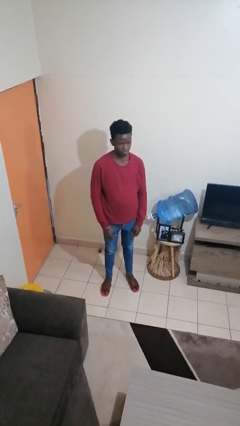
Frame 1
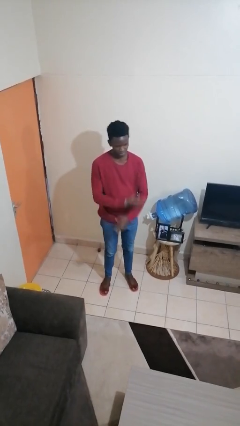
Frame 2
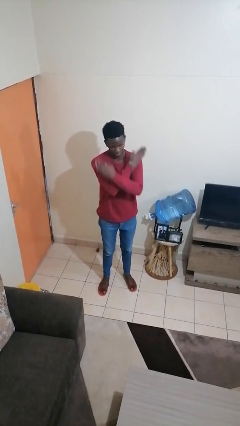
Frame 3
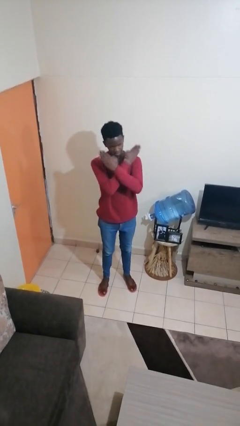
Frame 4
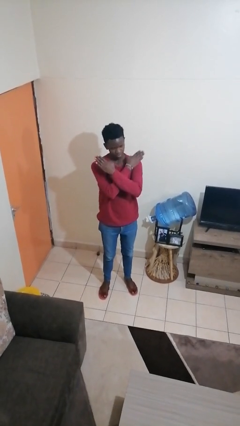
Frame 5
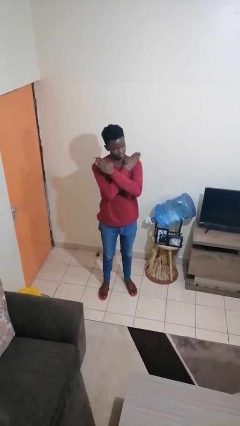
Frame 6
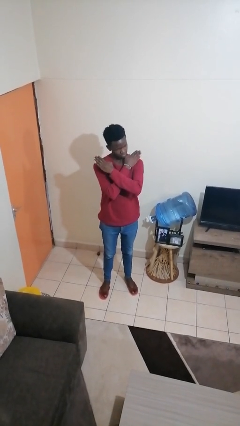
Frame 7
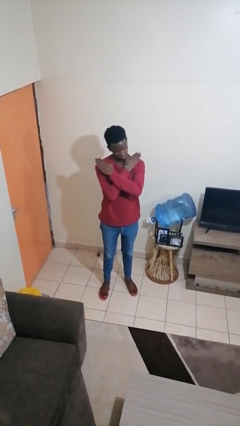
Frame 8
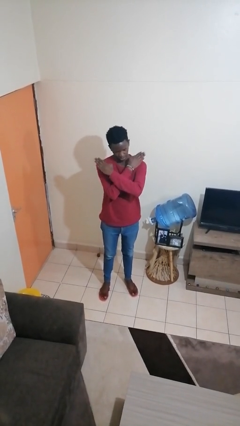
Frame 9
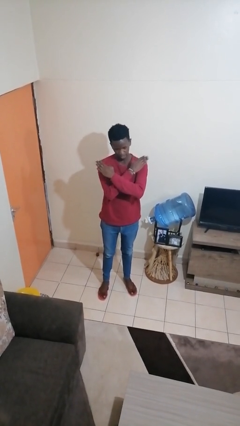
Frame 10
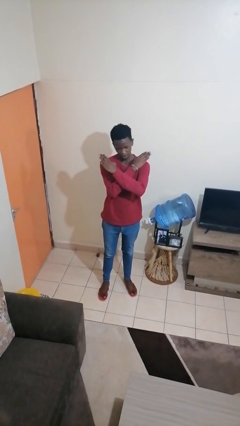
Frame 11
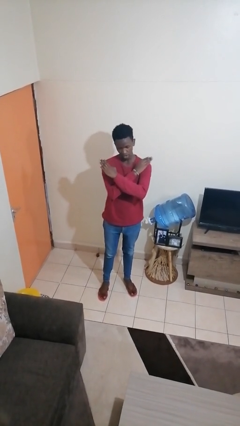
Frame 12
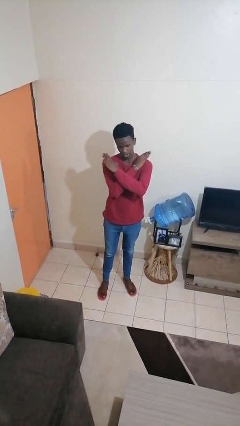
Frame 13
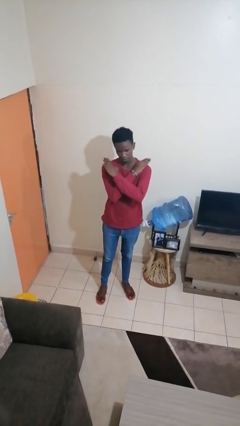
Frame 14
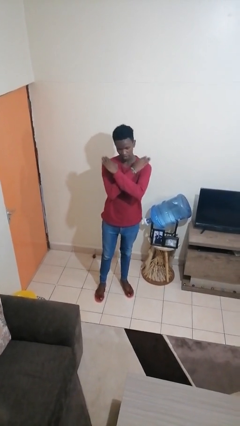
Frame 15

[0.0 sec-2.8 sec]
person gestures arms x

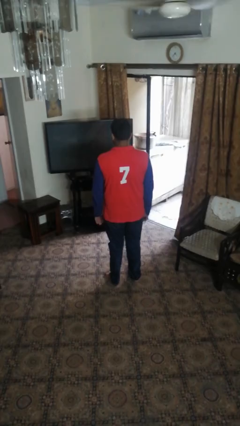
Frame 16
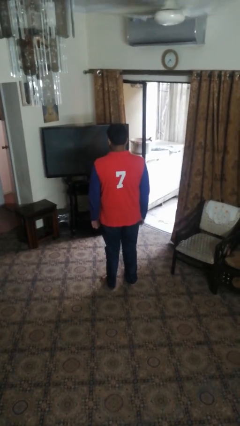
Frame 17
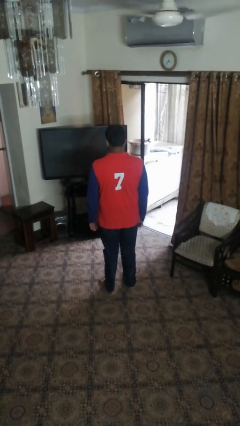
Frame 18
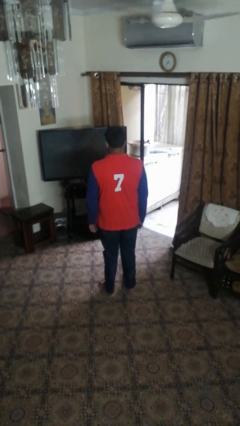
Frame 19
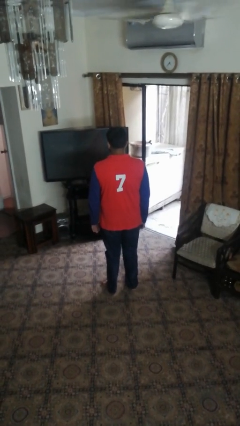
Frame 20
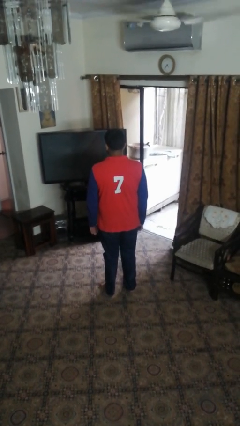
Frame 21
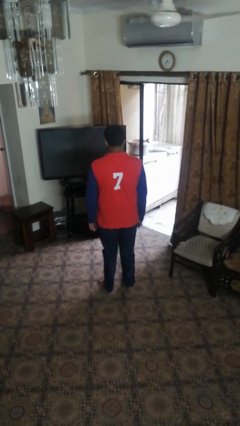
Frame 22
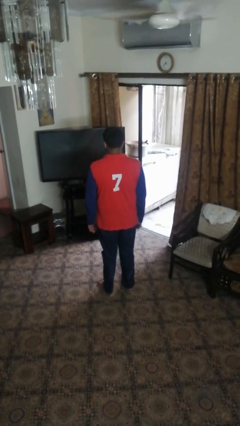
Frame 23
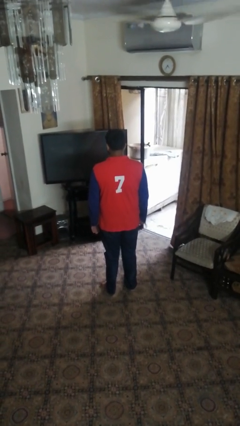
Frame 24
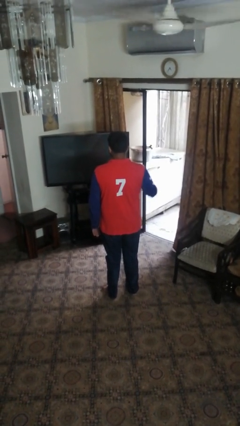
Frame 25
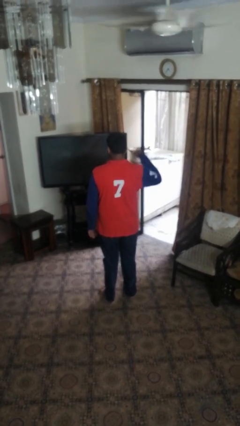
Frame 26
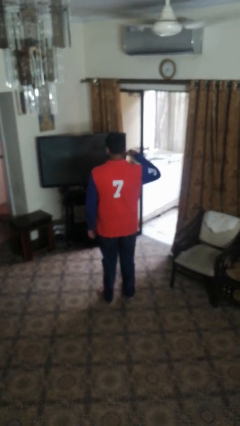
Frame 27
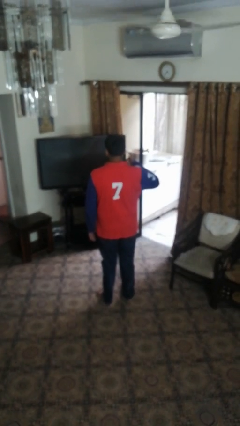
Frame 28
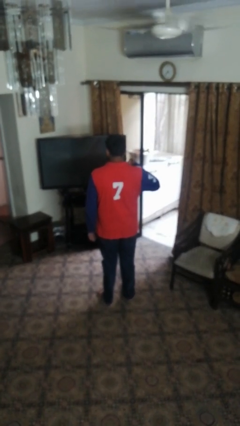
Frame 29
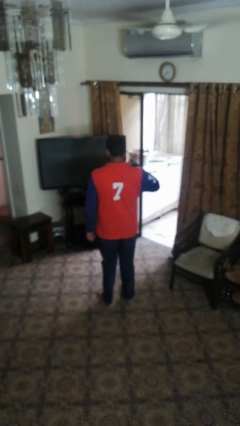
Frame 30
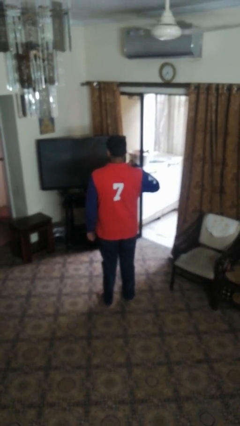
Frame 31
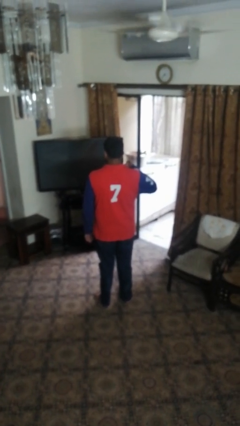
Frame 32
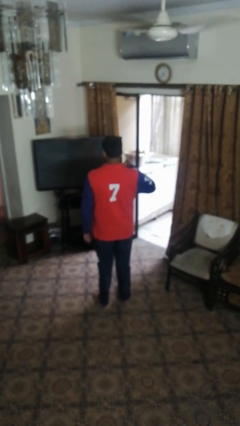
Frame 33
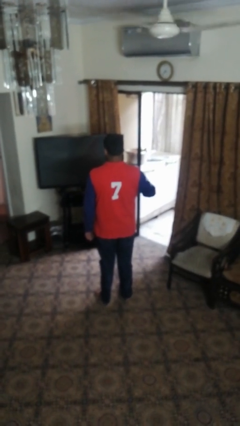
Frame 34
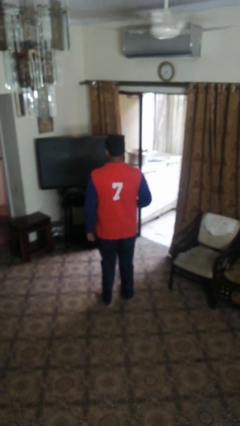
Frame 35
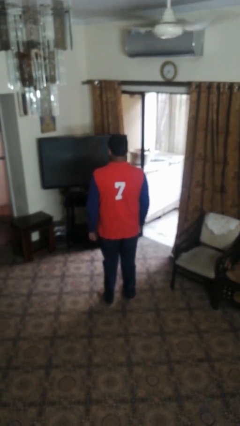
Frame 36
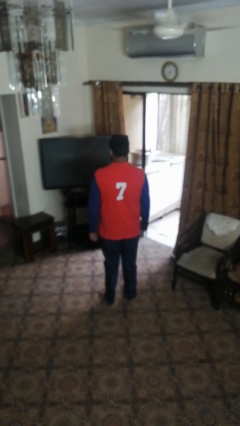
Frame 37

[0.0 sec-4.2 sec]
person gestures hang loose

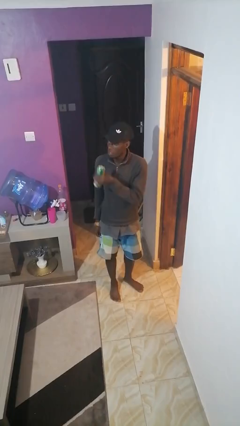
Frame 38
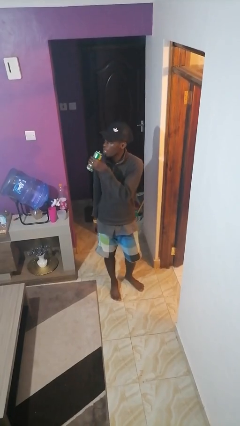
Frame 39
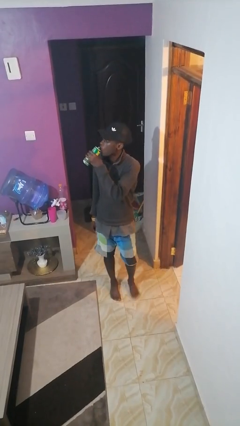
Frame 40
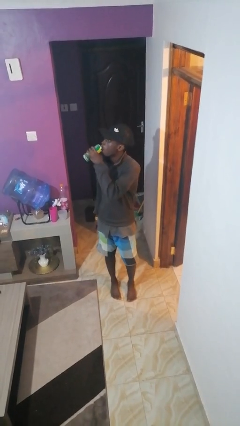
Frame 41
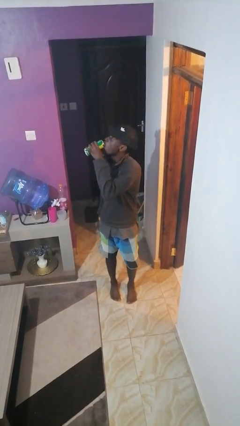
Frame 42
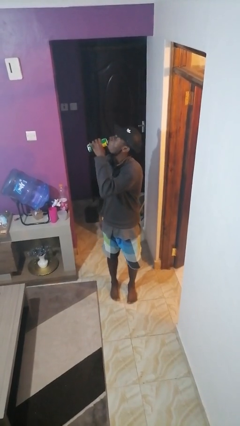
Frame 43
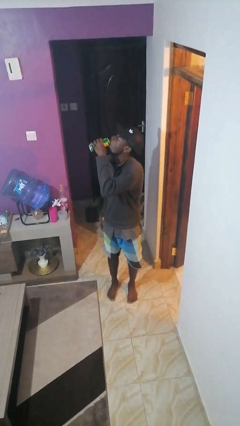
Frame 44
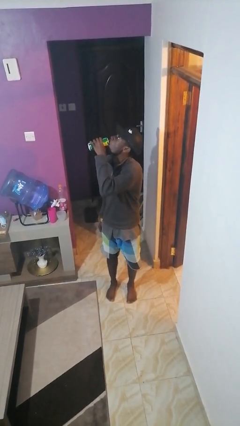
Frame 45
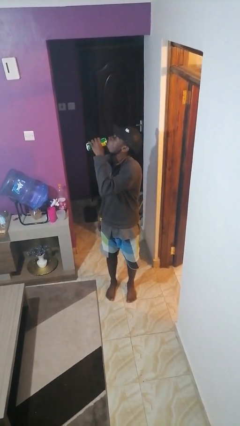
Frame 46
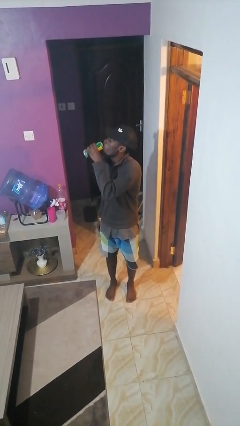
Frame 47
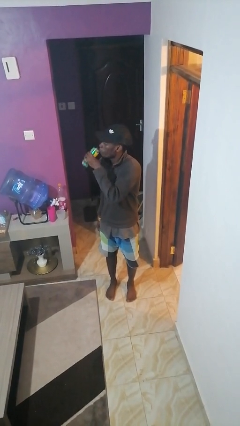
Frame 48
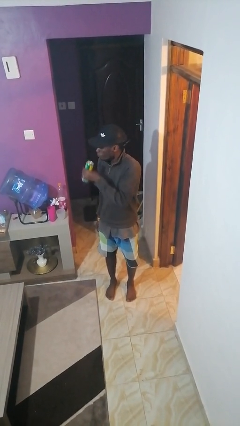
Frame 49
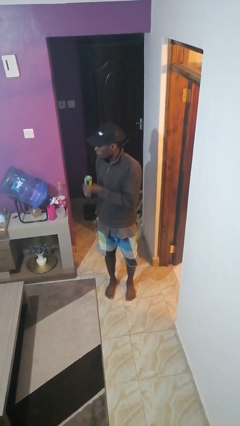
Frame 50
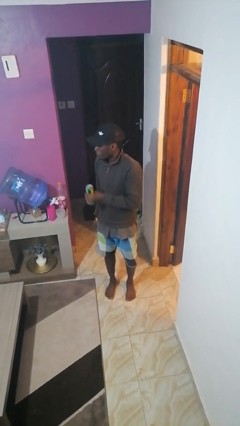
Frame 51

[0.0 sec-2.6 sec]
person drinks from beverage can

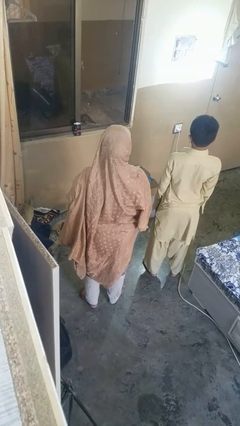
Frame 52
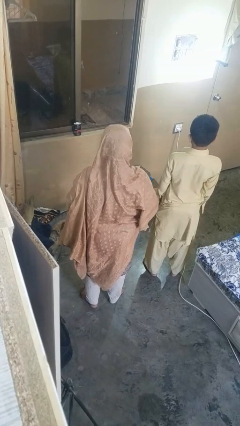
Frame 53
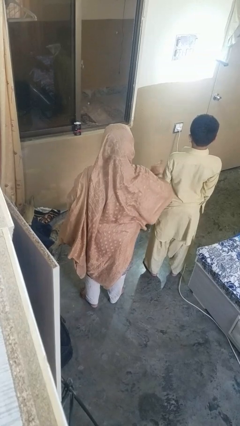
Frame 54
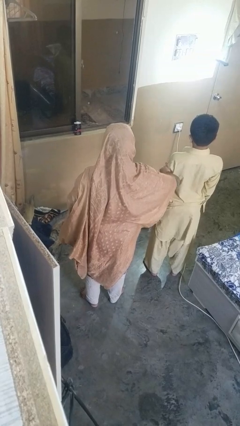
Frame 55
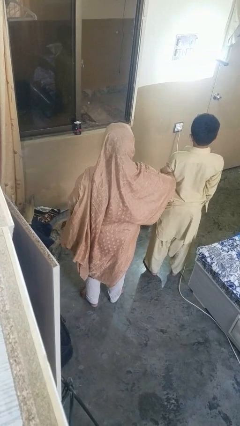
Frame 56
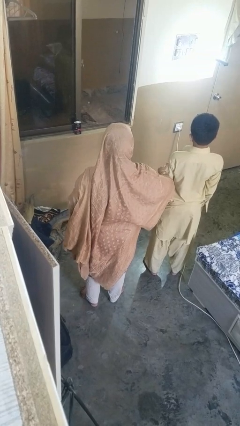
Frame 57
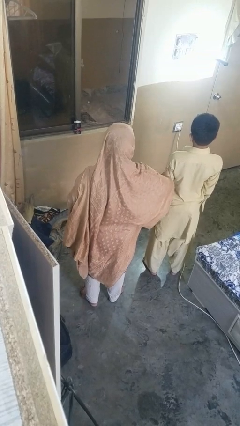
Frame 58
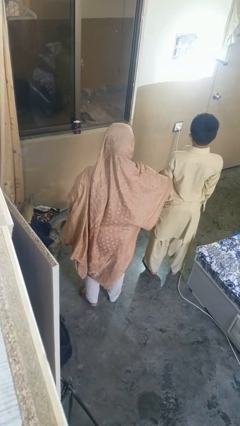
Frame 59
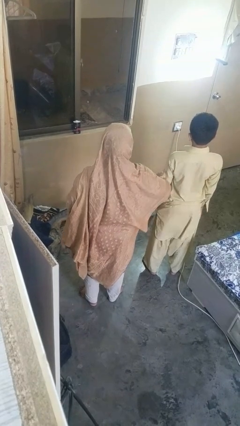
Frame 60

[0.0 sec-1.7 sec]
person grabs person by bicep

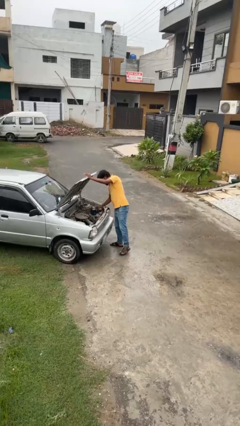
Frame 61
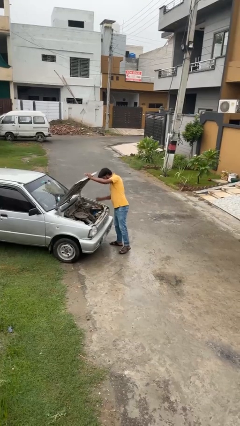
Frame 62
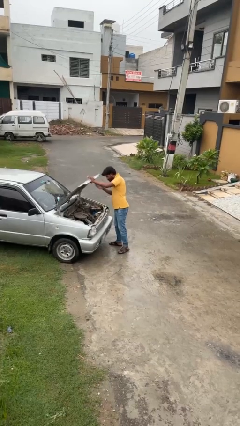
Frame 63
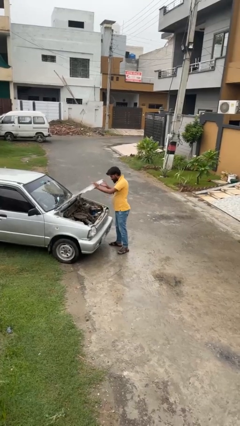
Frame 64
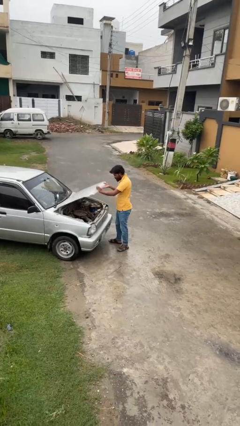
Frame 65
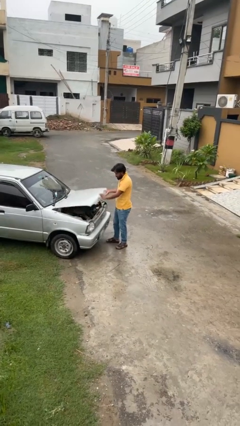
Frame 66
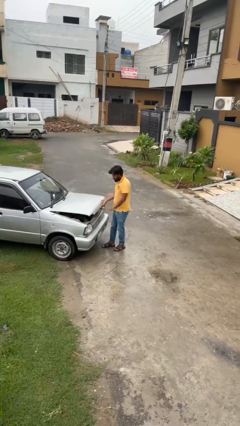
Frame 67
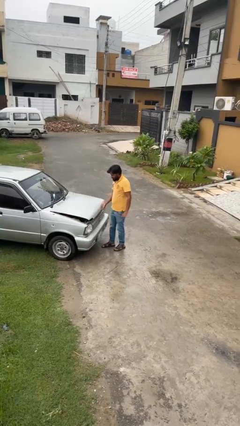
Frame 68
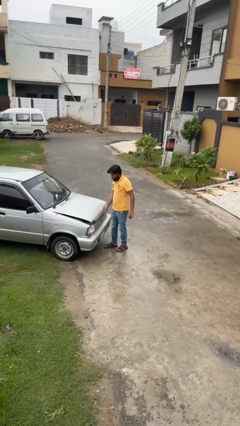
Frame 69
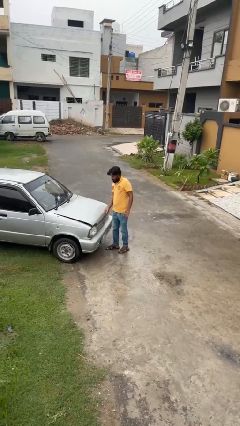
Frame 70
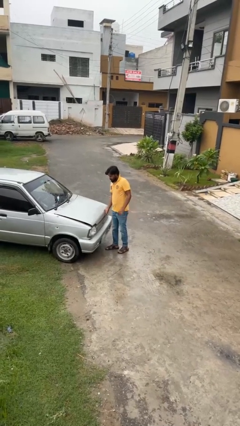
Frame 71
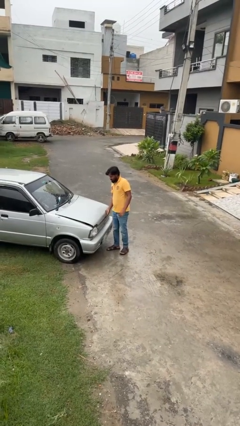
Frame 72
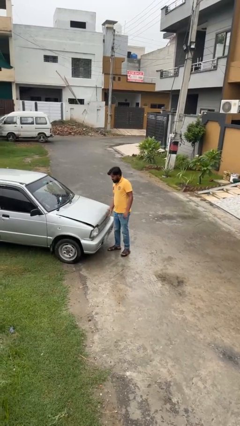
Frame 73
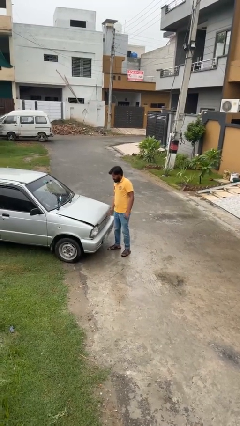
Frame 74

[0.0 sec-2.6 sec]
person closes car hood

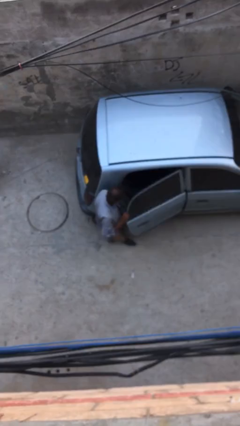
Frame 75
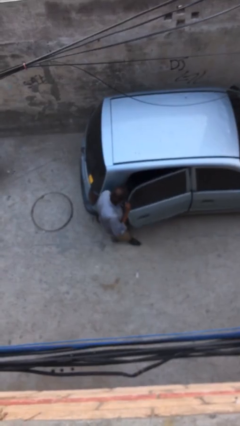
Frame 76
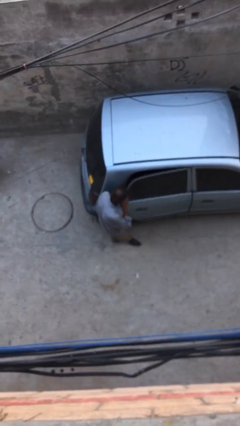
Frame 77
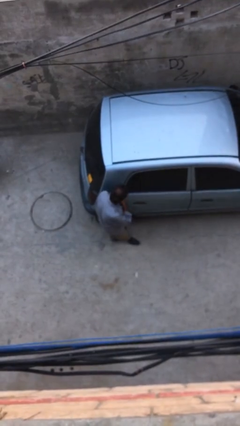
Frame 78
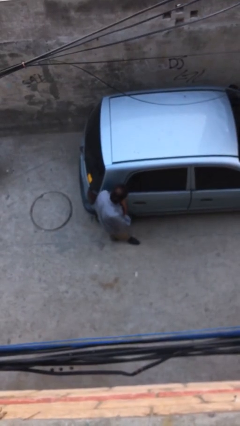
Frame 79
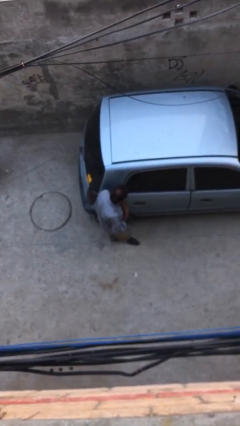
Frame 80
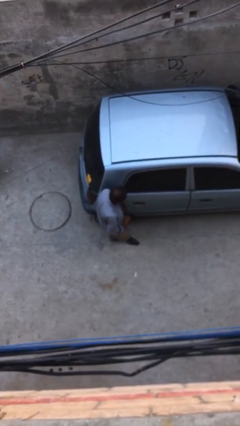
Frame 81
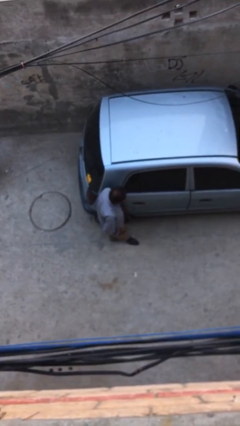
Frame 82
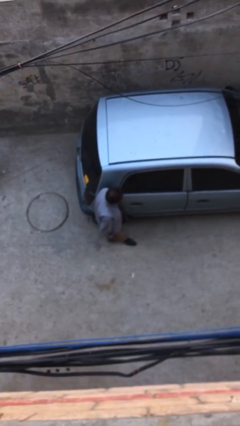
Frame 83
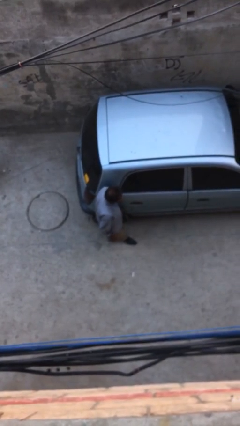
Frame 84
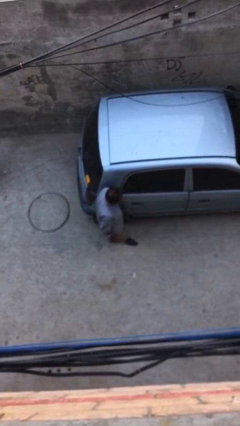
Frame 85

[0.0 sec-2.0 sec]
person closes car door

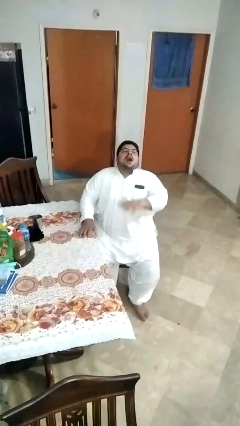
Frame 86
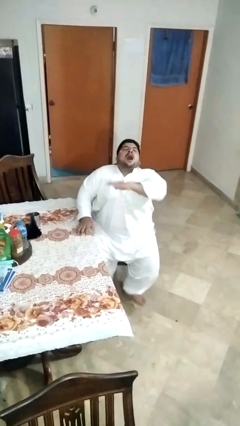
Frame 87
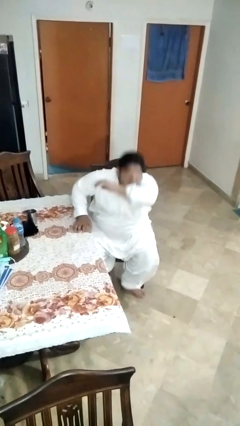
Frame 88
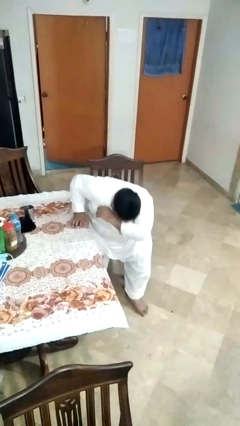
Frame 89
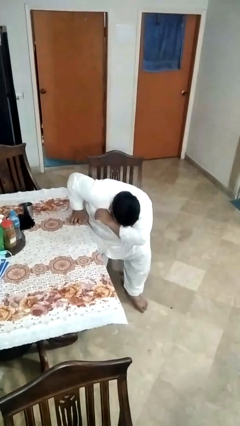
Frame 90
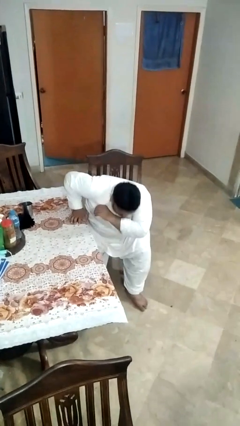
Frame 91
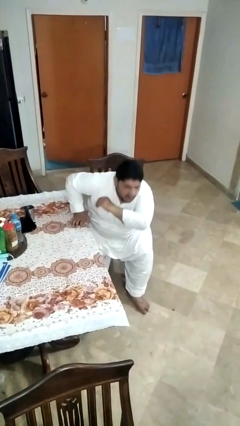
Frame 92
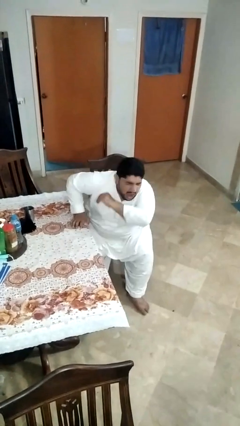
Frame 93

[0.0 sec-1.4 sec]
person sneezes into arm
